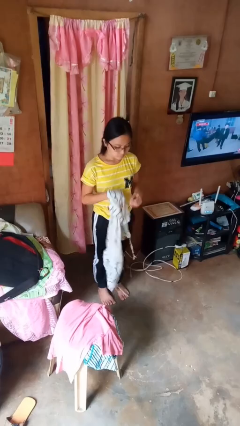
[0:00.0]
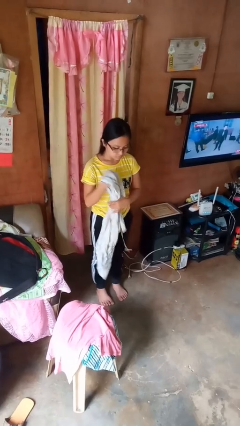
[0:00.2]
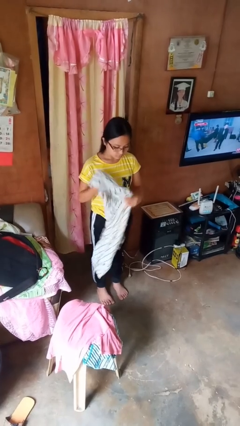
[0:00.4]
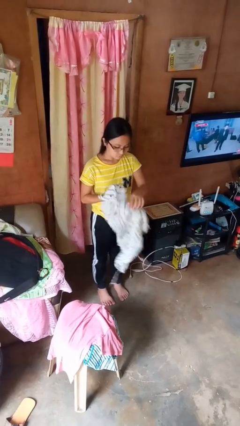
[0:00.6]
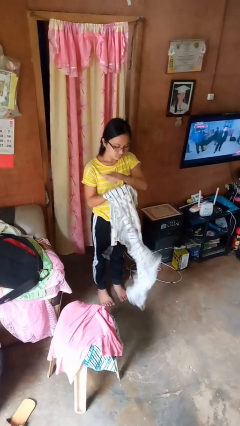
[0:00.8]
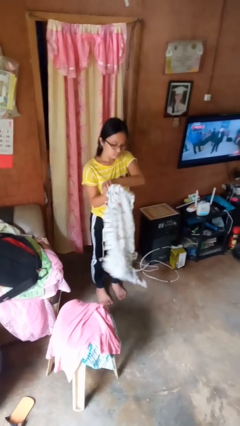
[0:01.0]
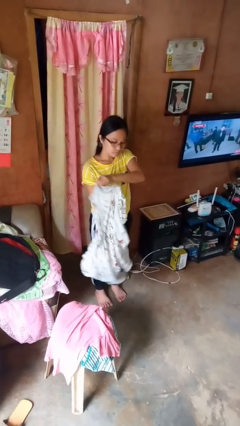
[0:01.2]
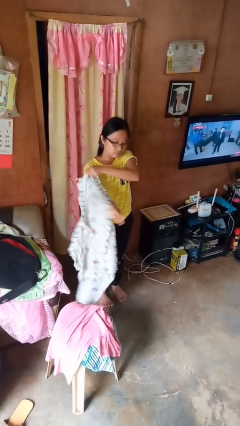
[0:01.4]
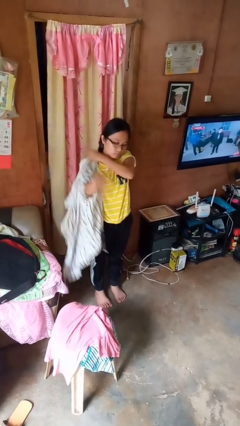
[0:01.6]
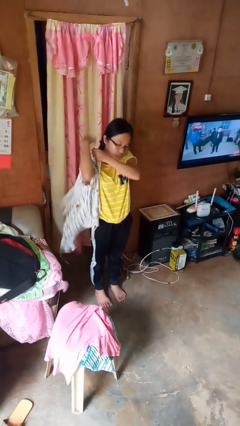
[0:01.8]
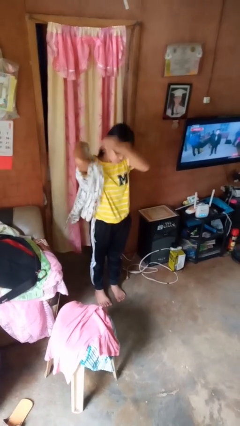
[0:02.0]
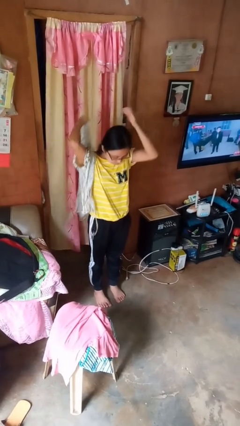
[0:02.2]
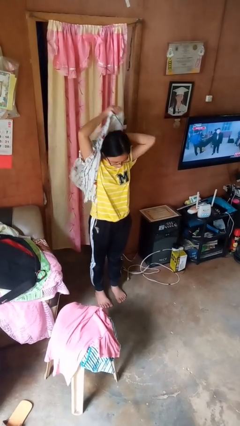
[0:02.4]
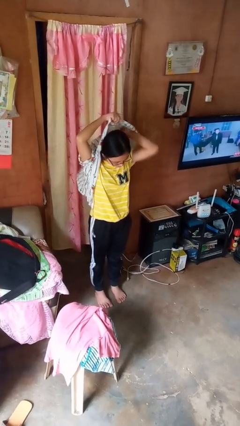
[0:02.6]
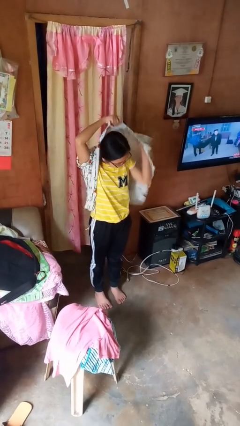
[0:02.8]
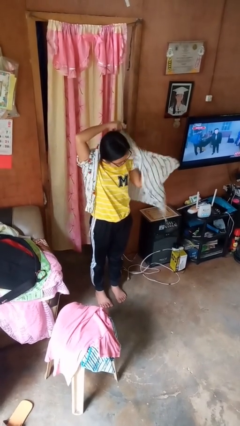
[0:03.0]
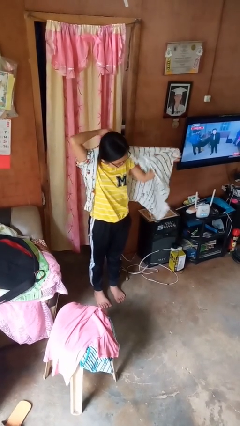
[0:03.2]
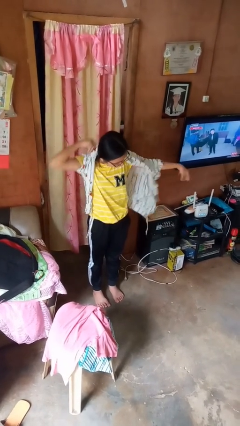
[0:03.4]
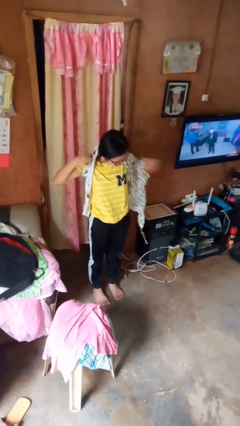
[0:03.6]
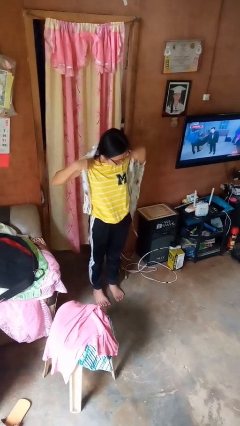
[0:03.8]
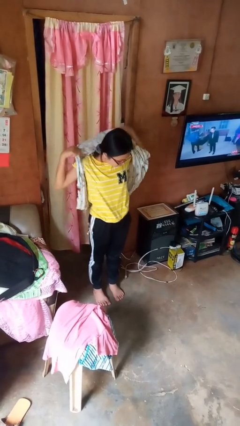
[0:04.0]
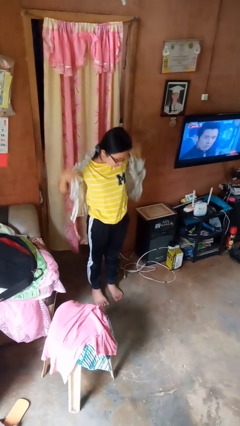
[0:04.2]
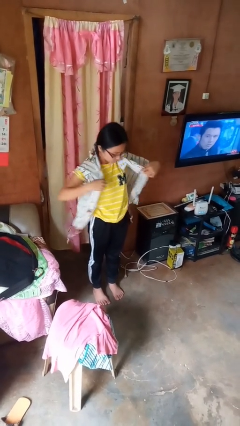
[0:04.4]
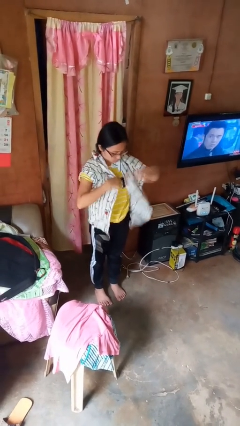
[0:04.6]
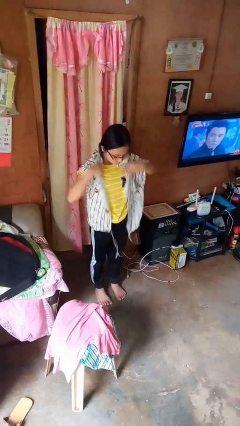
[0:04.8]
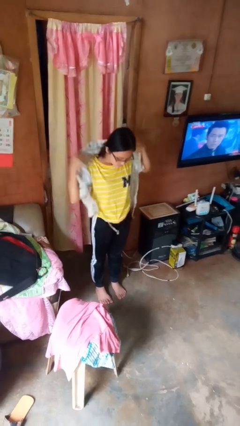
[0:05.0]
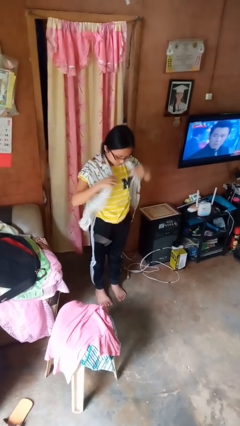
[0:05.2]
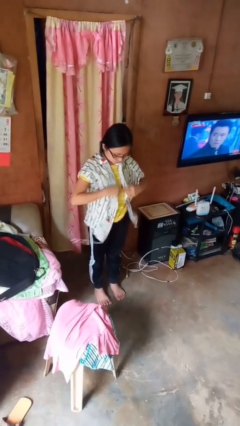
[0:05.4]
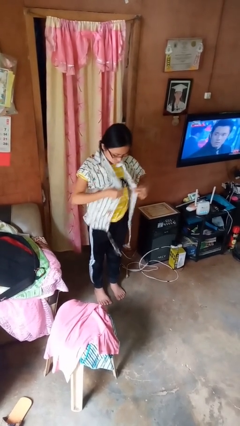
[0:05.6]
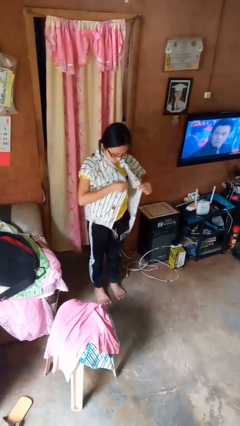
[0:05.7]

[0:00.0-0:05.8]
person puts on shirt

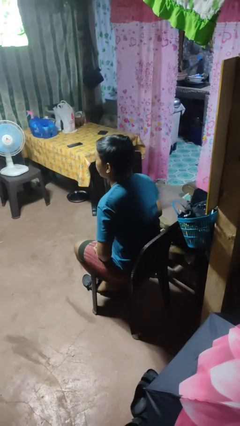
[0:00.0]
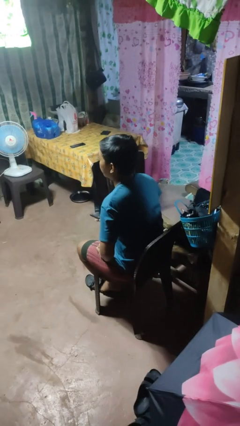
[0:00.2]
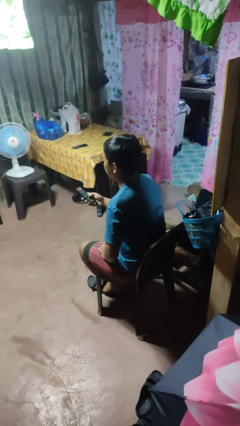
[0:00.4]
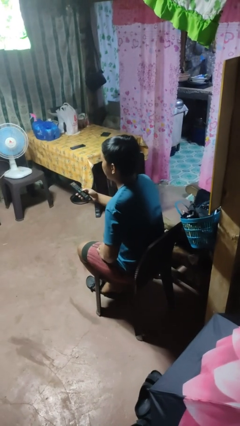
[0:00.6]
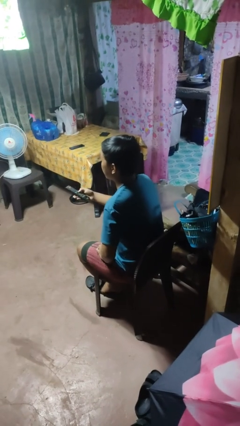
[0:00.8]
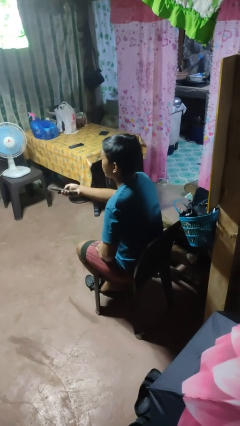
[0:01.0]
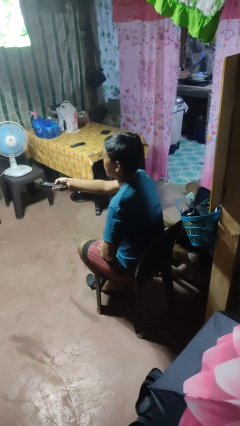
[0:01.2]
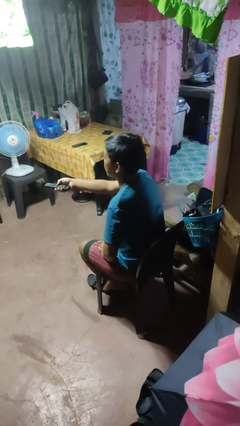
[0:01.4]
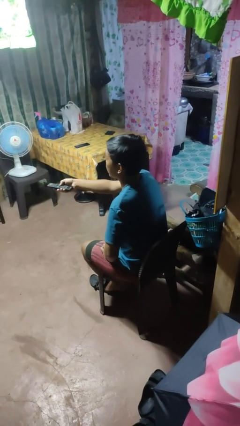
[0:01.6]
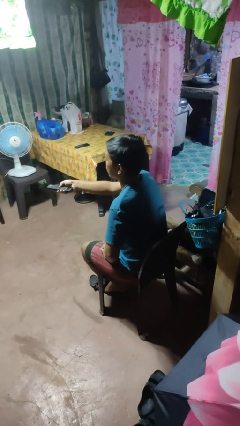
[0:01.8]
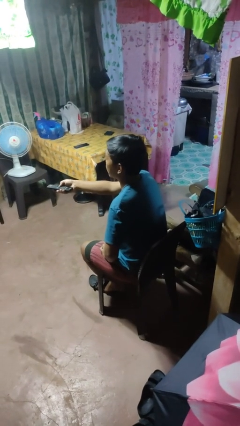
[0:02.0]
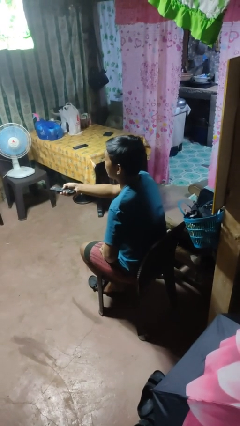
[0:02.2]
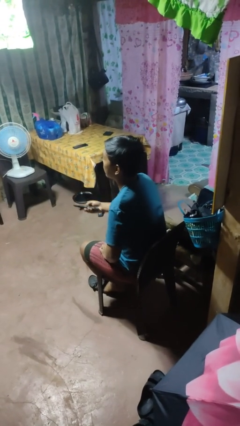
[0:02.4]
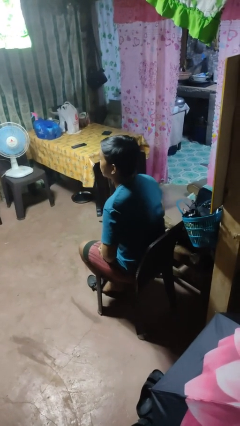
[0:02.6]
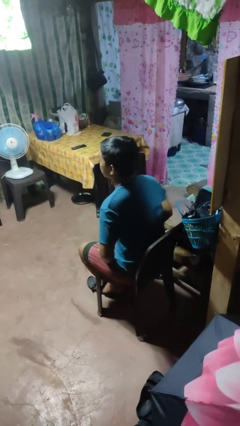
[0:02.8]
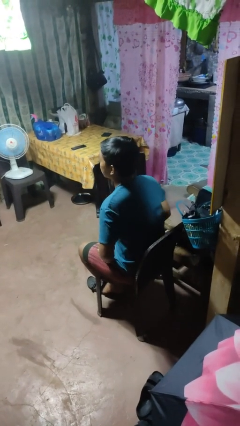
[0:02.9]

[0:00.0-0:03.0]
person uses television remote

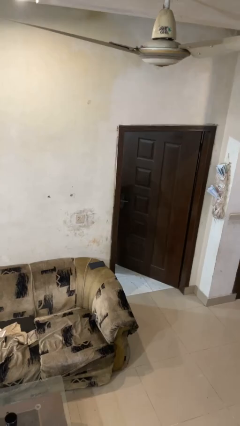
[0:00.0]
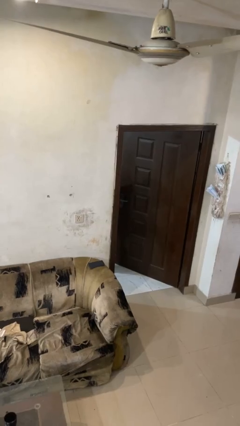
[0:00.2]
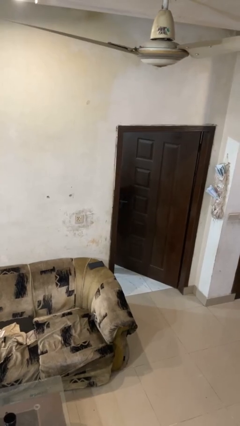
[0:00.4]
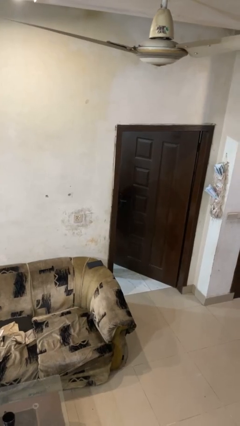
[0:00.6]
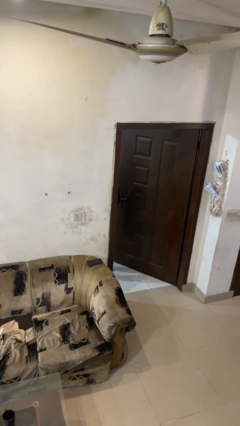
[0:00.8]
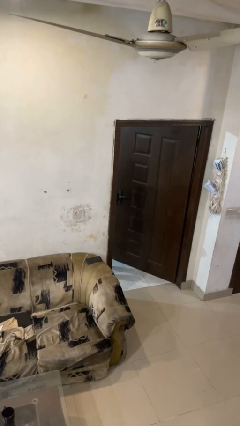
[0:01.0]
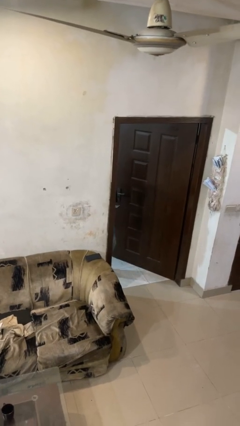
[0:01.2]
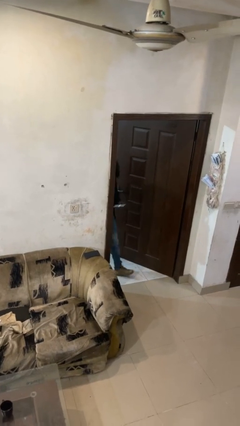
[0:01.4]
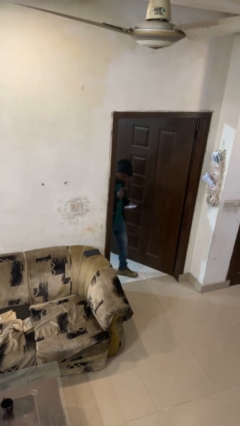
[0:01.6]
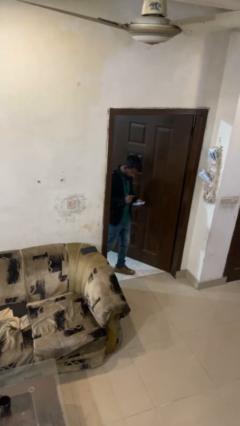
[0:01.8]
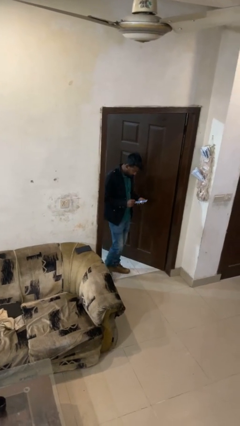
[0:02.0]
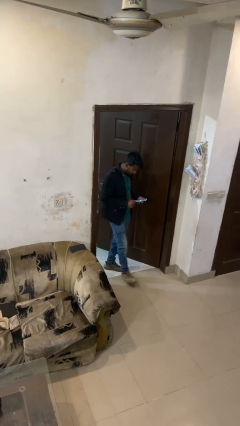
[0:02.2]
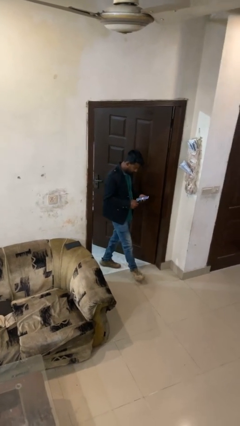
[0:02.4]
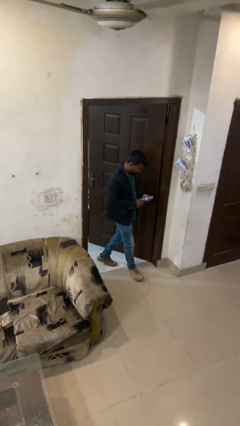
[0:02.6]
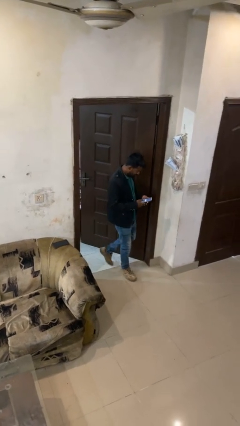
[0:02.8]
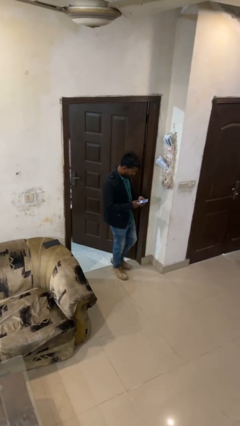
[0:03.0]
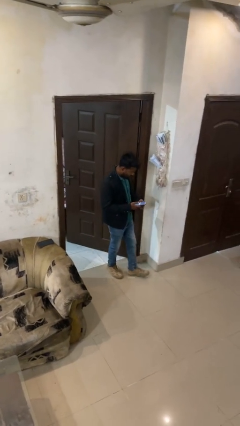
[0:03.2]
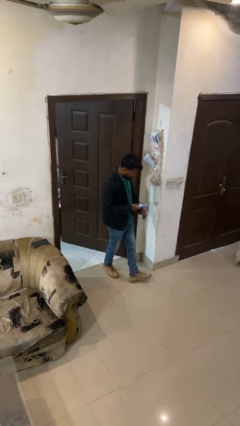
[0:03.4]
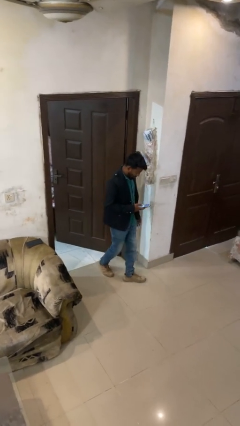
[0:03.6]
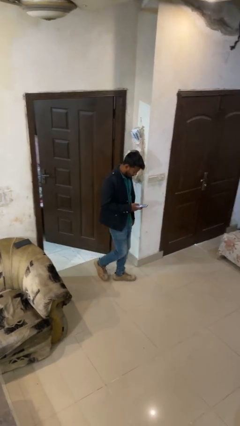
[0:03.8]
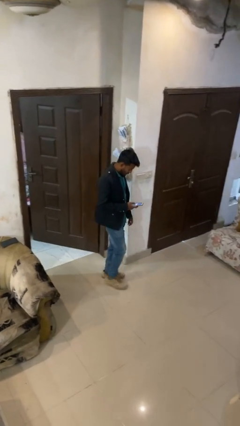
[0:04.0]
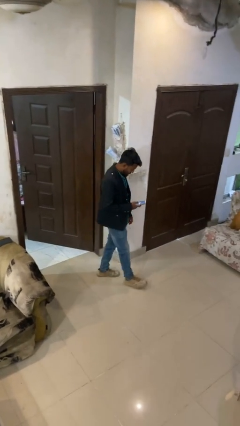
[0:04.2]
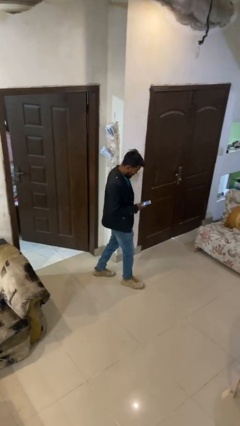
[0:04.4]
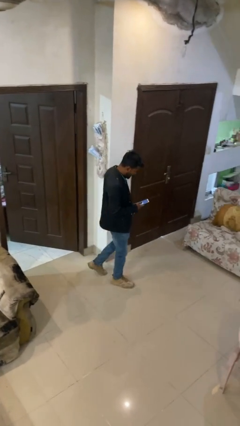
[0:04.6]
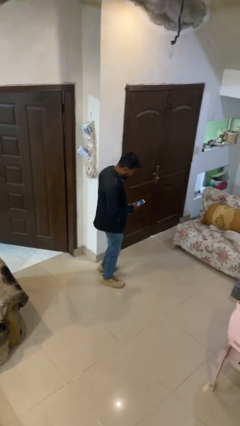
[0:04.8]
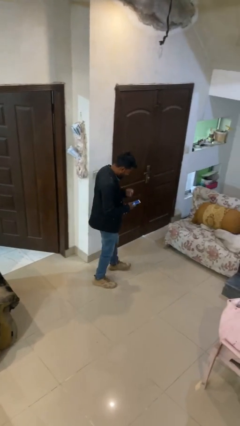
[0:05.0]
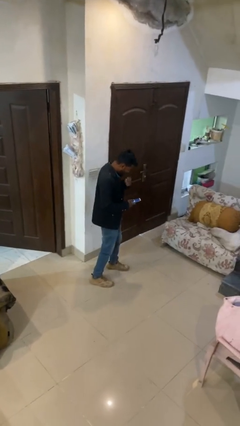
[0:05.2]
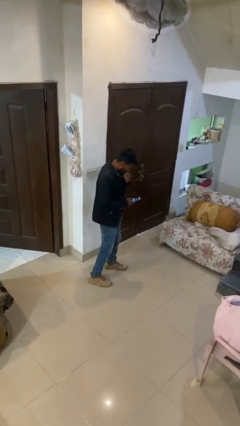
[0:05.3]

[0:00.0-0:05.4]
person enters scene through structure

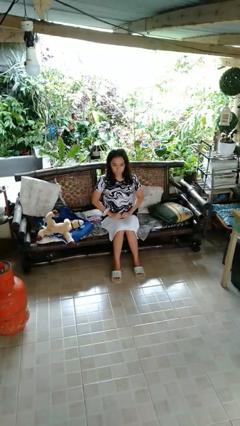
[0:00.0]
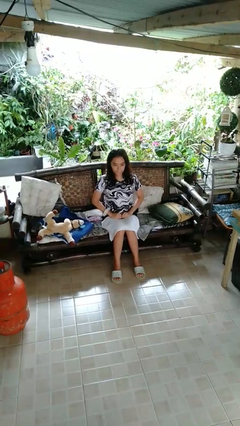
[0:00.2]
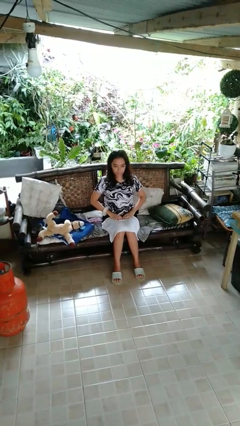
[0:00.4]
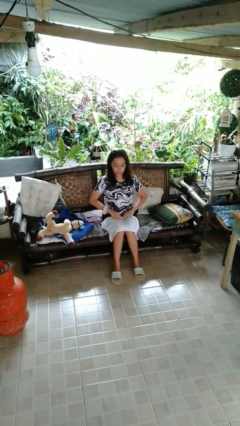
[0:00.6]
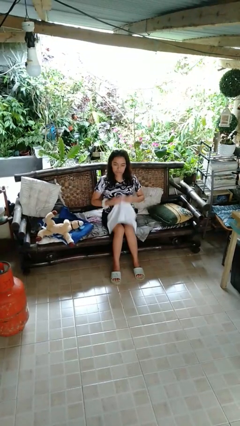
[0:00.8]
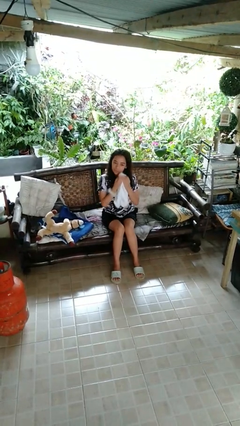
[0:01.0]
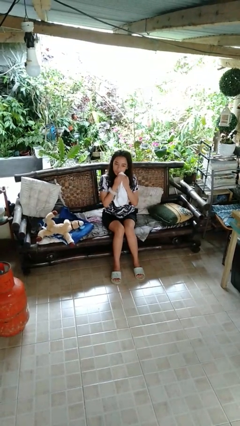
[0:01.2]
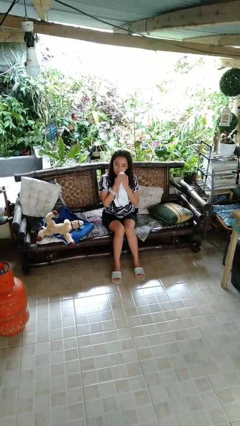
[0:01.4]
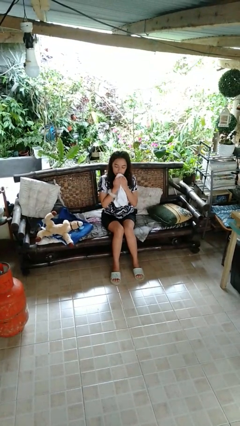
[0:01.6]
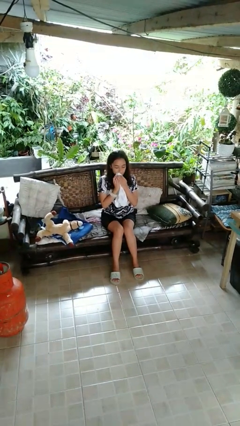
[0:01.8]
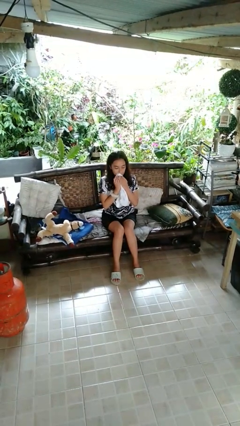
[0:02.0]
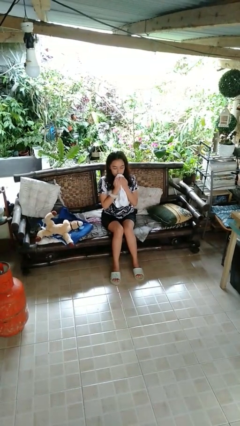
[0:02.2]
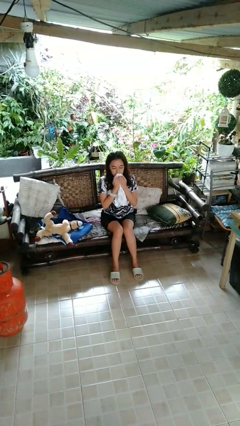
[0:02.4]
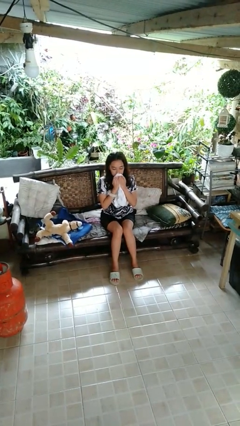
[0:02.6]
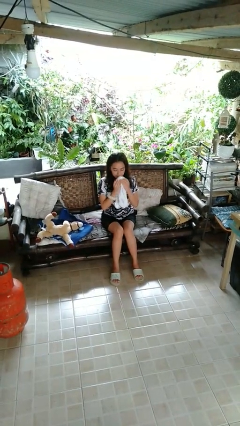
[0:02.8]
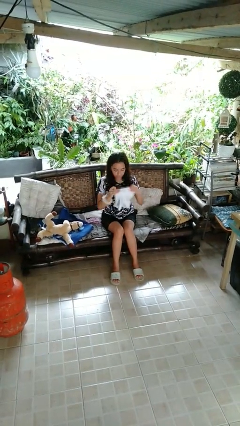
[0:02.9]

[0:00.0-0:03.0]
person wipes mouth with napkin
